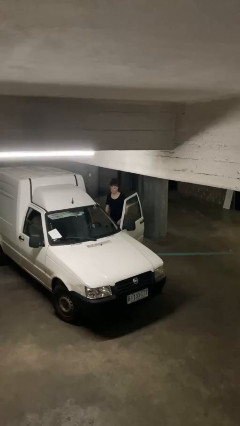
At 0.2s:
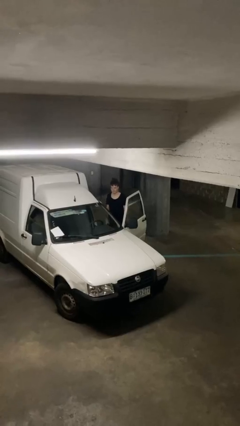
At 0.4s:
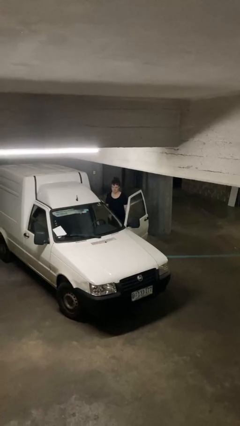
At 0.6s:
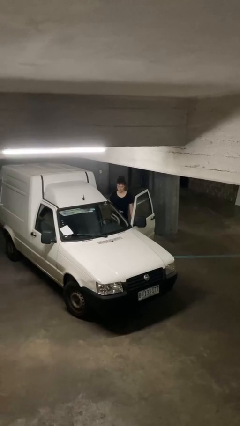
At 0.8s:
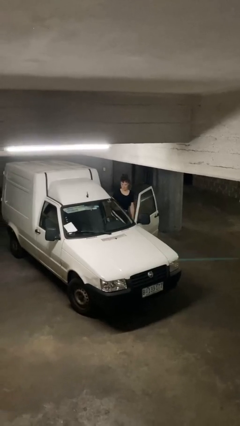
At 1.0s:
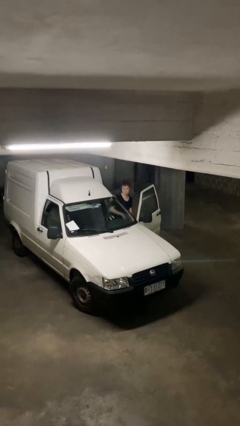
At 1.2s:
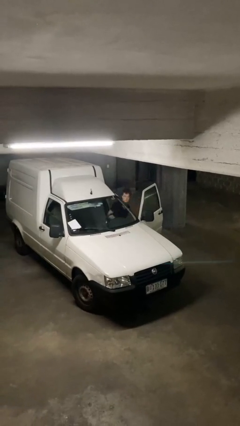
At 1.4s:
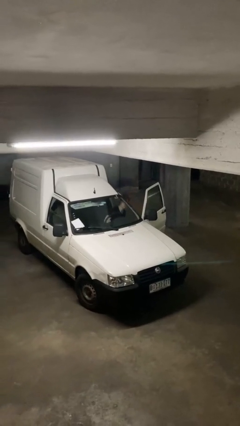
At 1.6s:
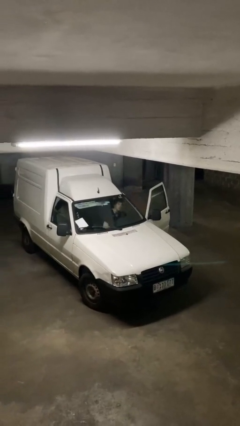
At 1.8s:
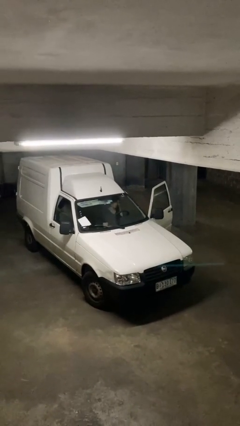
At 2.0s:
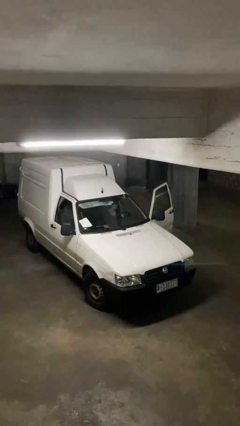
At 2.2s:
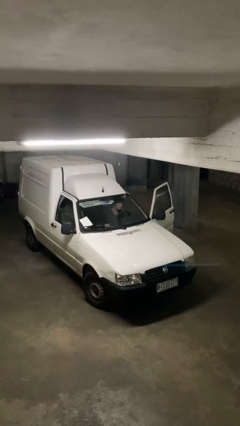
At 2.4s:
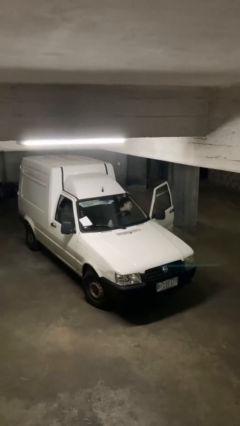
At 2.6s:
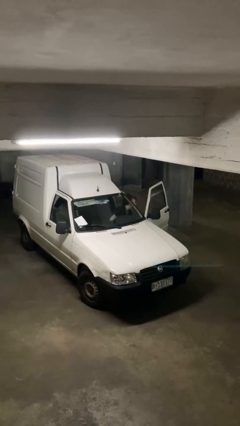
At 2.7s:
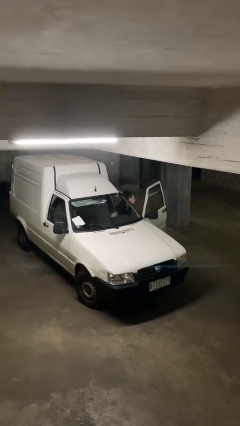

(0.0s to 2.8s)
person enters car

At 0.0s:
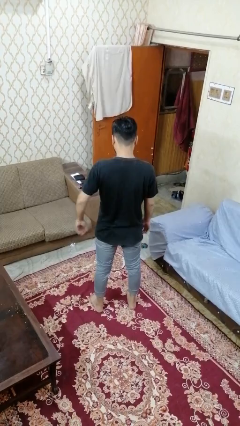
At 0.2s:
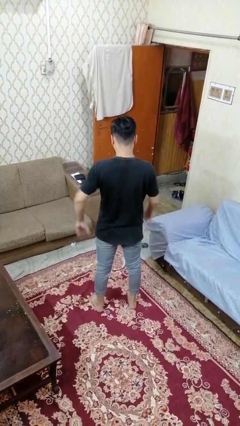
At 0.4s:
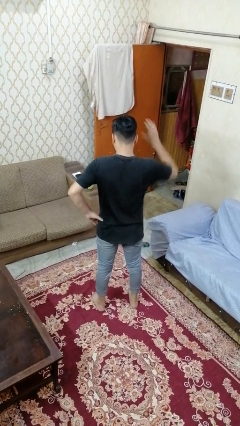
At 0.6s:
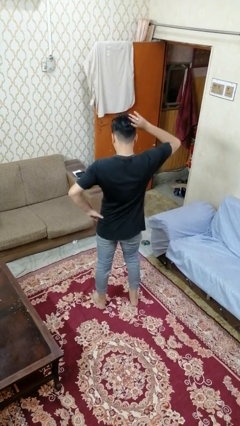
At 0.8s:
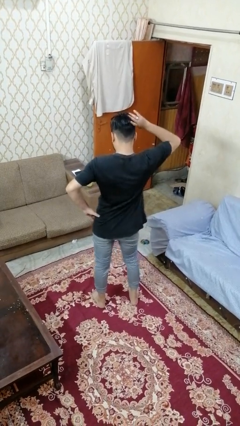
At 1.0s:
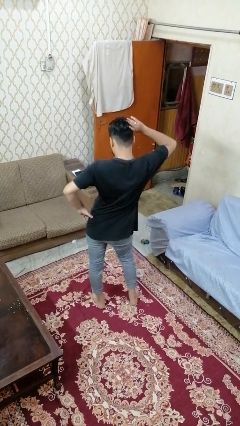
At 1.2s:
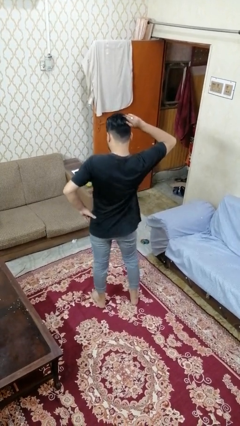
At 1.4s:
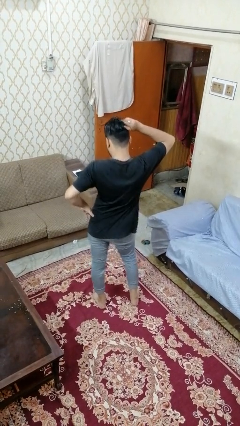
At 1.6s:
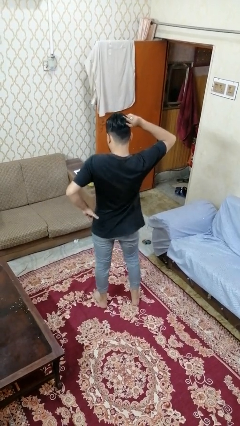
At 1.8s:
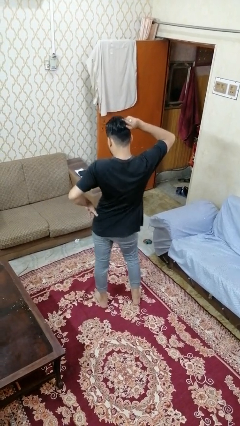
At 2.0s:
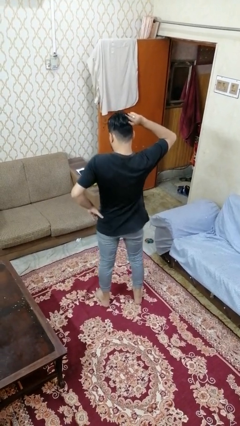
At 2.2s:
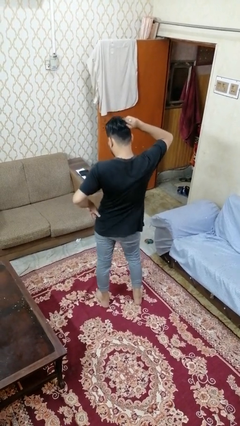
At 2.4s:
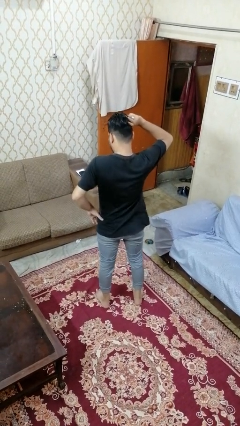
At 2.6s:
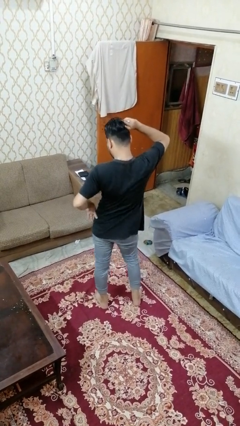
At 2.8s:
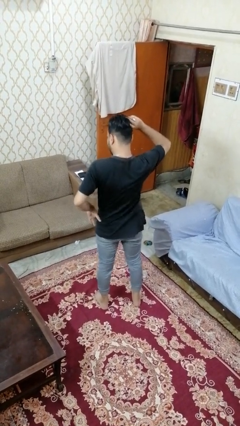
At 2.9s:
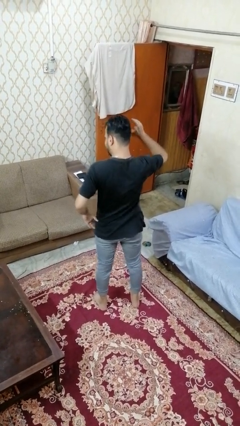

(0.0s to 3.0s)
person dances in place

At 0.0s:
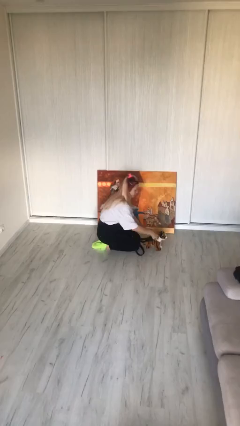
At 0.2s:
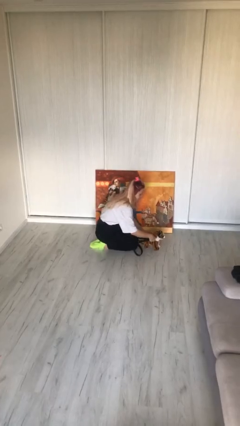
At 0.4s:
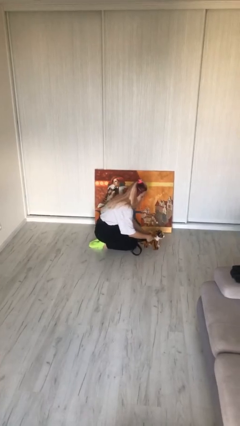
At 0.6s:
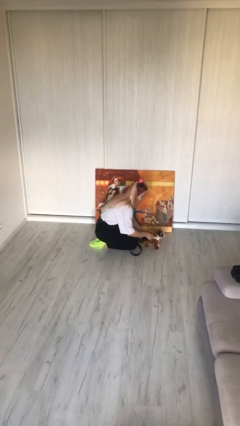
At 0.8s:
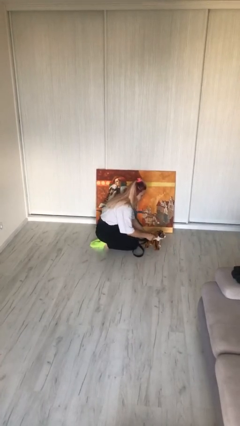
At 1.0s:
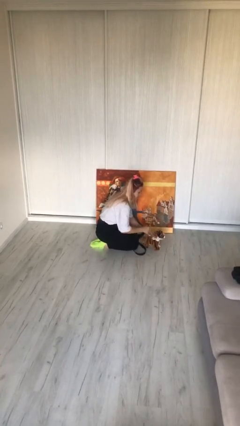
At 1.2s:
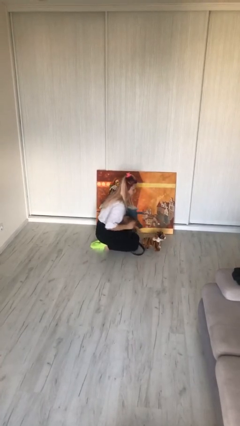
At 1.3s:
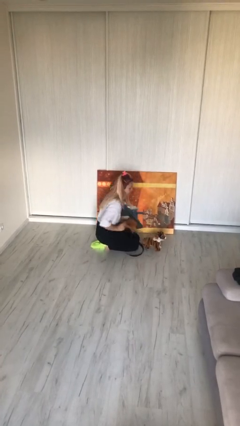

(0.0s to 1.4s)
person unattaches leash from dog

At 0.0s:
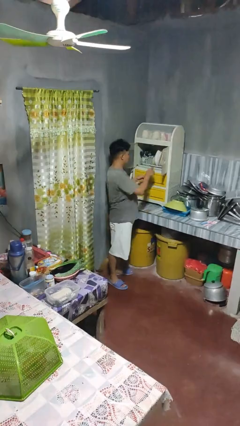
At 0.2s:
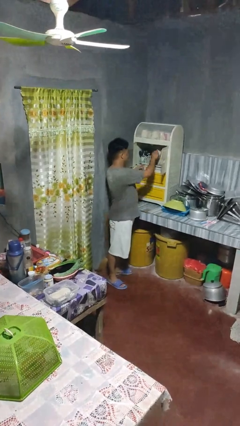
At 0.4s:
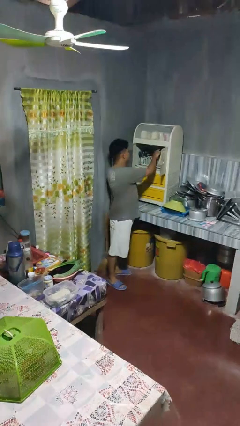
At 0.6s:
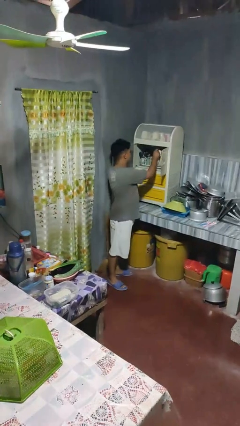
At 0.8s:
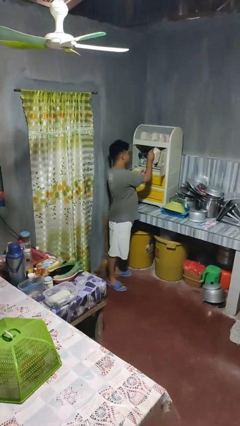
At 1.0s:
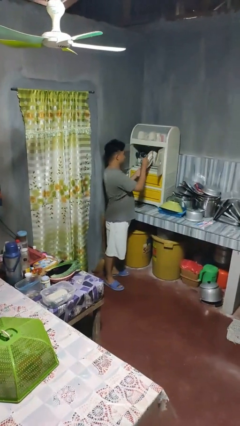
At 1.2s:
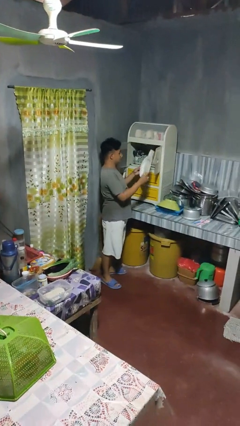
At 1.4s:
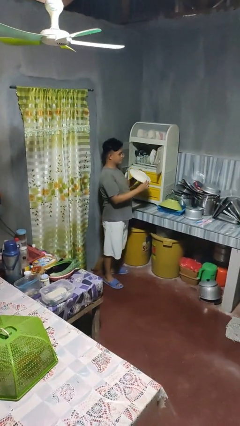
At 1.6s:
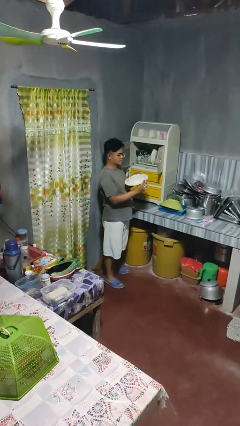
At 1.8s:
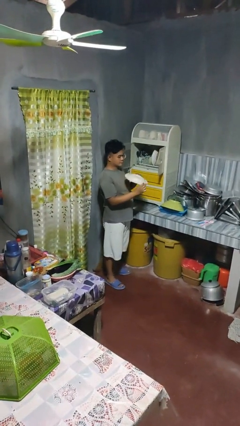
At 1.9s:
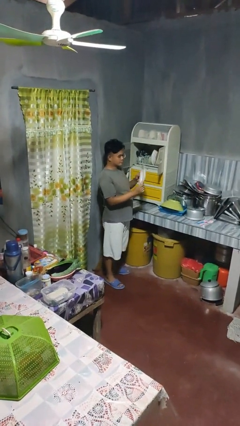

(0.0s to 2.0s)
person takes object from cabinet

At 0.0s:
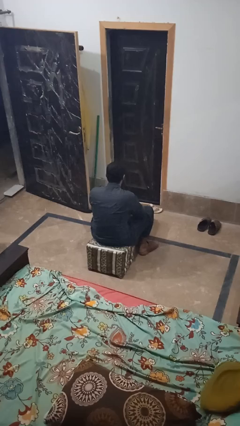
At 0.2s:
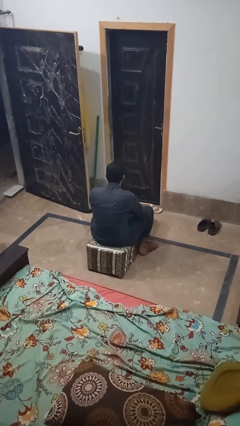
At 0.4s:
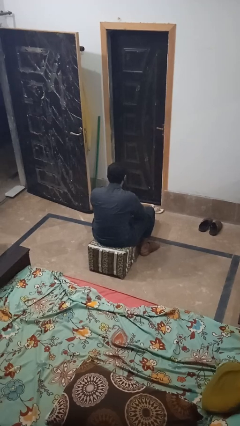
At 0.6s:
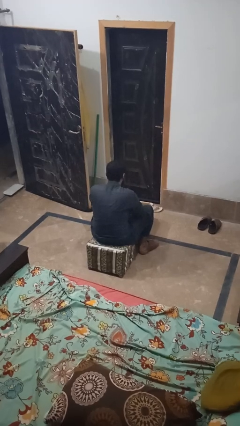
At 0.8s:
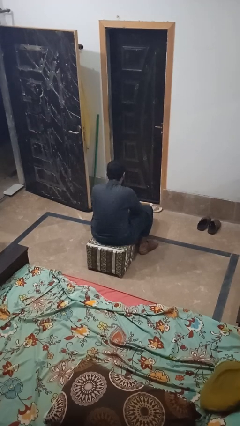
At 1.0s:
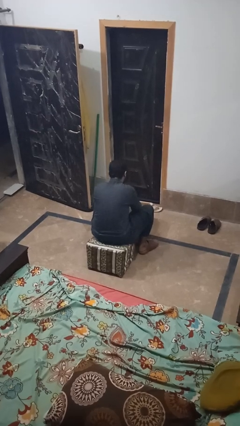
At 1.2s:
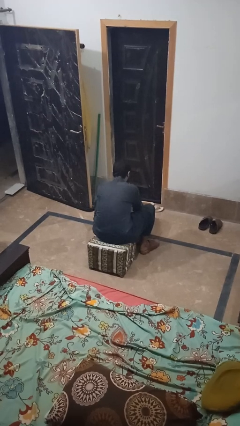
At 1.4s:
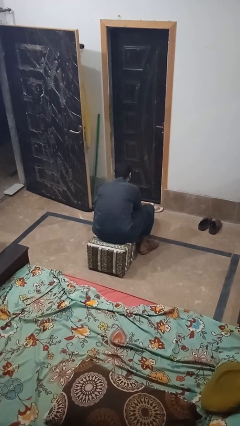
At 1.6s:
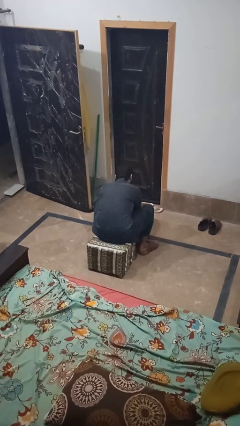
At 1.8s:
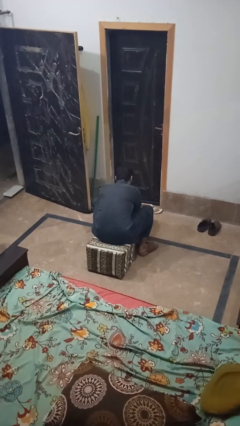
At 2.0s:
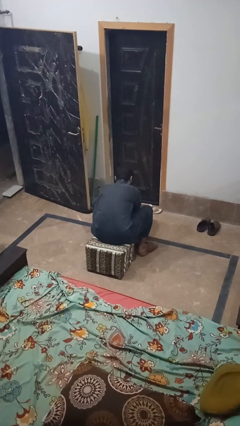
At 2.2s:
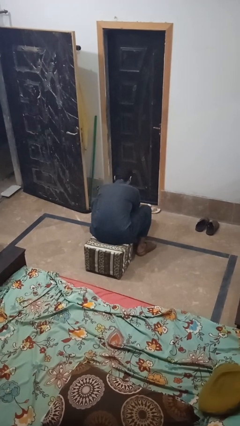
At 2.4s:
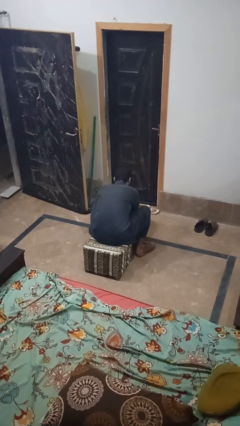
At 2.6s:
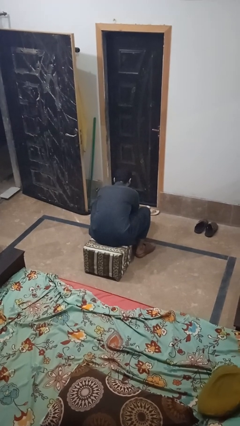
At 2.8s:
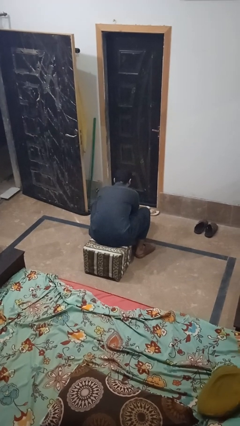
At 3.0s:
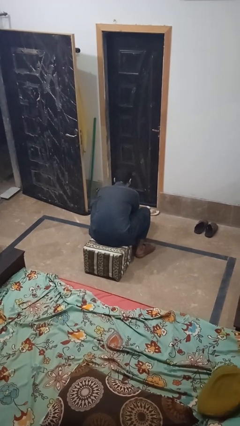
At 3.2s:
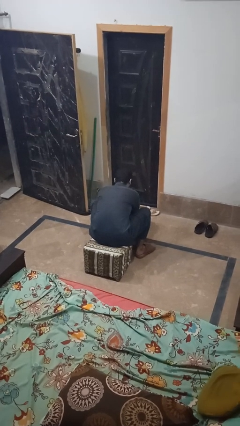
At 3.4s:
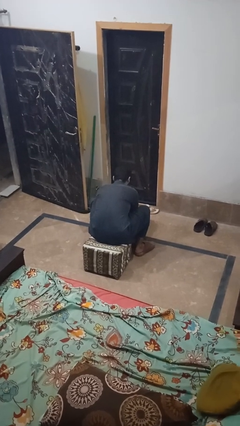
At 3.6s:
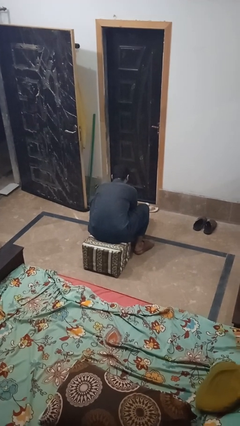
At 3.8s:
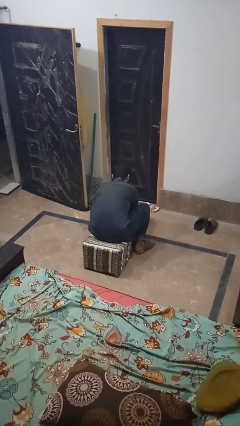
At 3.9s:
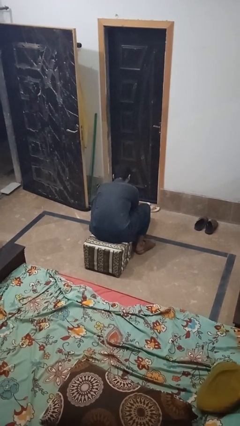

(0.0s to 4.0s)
person searches in box

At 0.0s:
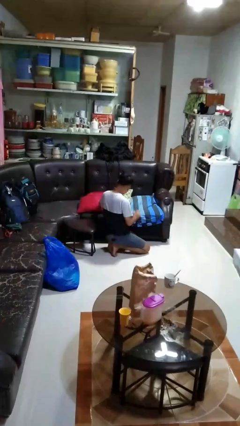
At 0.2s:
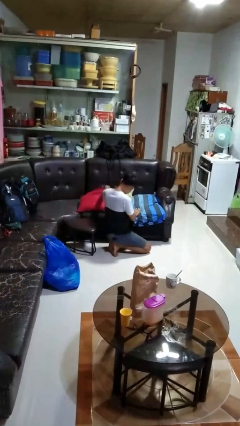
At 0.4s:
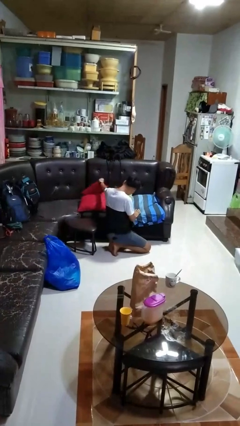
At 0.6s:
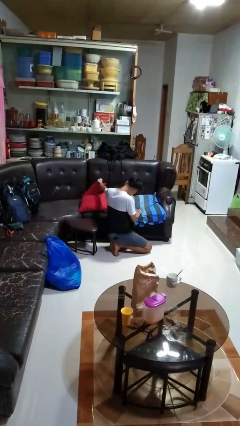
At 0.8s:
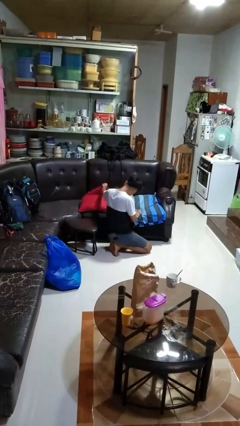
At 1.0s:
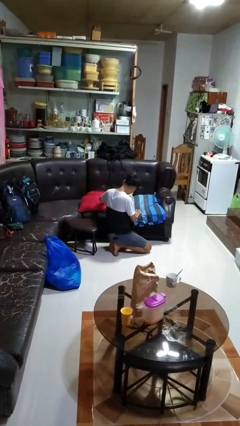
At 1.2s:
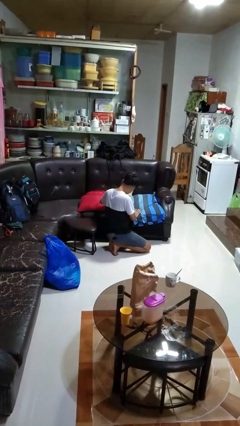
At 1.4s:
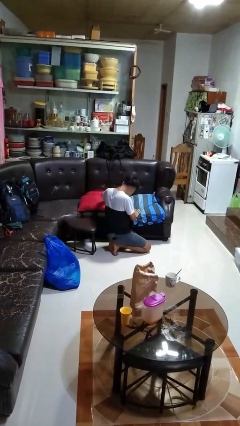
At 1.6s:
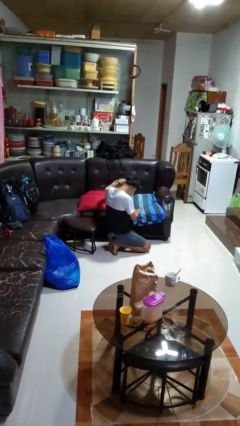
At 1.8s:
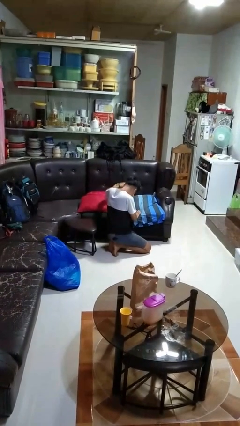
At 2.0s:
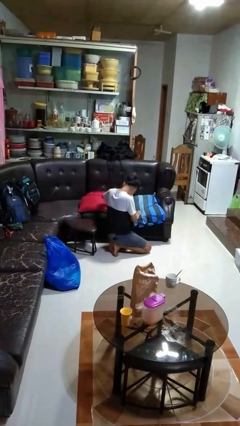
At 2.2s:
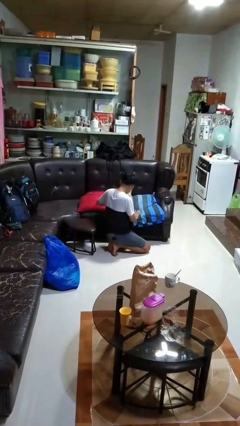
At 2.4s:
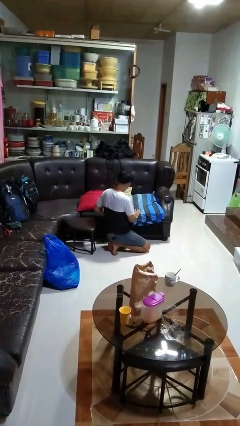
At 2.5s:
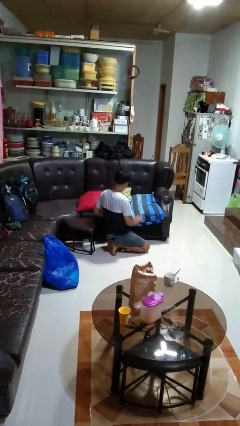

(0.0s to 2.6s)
person searches in couch

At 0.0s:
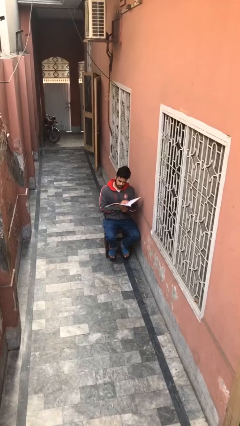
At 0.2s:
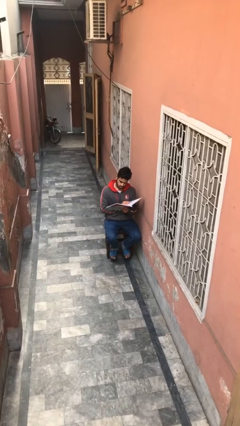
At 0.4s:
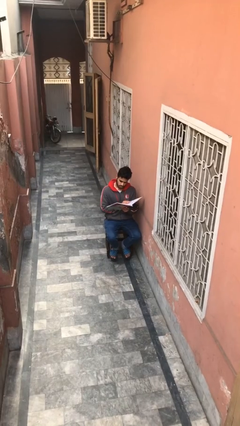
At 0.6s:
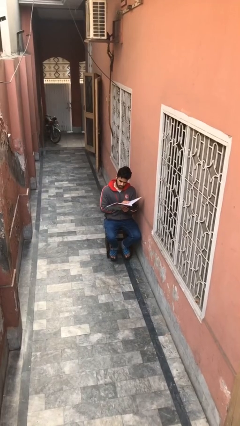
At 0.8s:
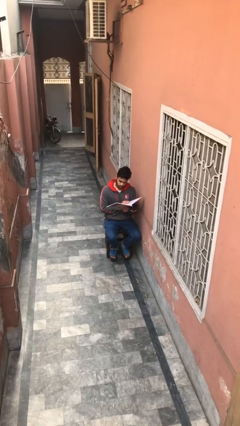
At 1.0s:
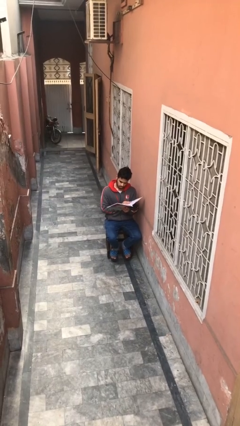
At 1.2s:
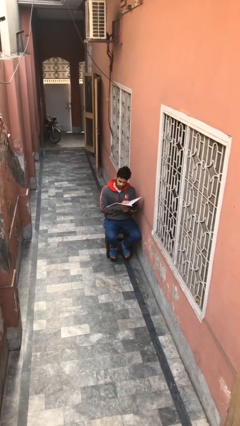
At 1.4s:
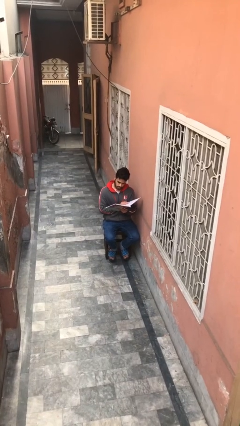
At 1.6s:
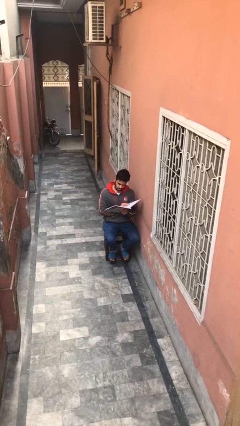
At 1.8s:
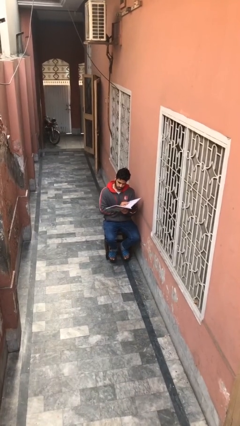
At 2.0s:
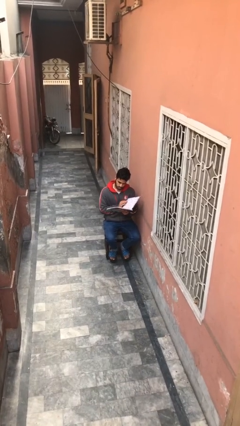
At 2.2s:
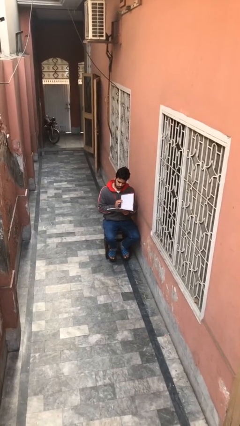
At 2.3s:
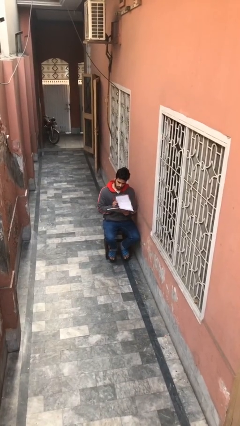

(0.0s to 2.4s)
person reads document
